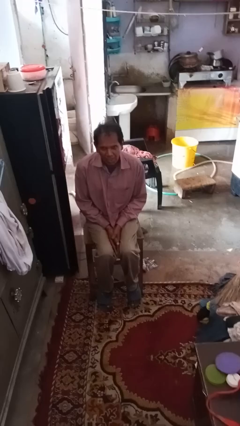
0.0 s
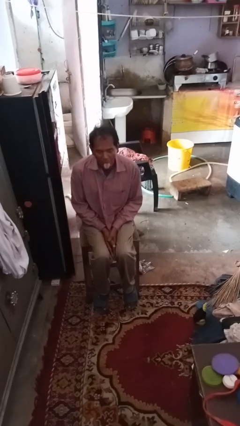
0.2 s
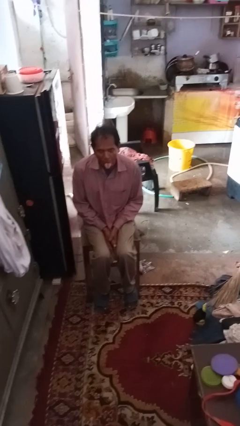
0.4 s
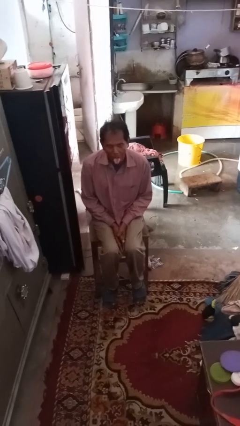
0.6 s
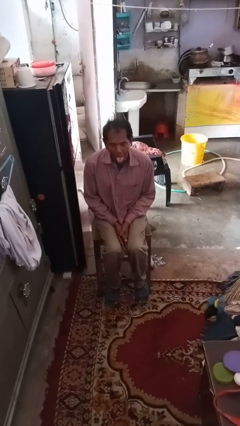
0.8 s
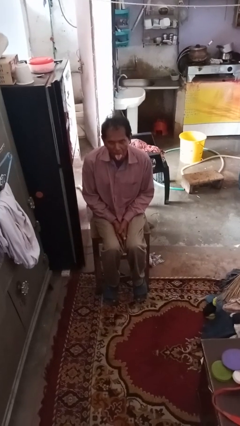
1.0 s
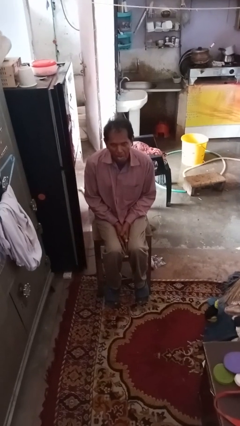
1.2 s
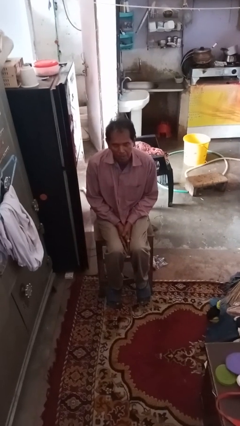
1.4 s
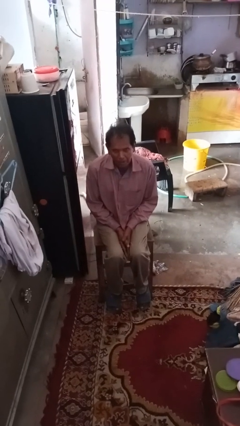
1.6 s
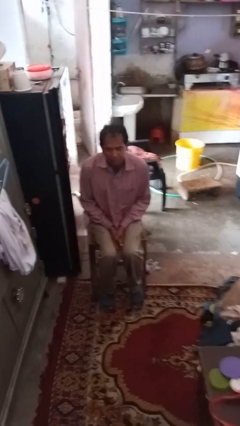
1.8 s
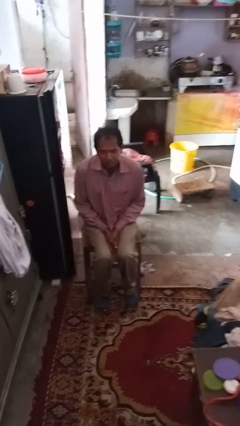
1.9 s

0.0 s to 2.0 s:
person sticks out tongue

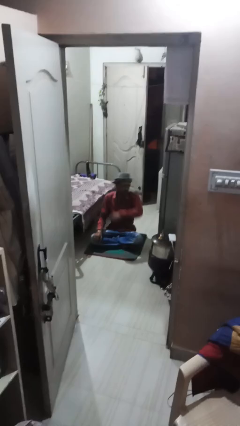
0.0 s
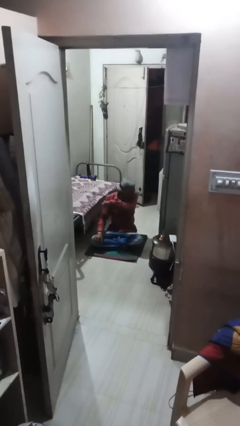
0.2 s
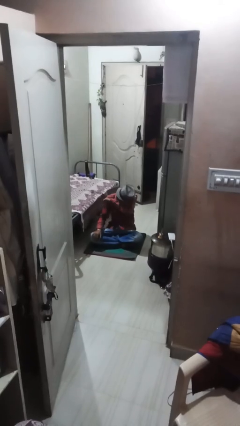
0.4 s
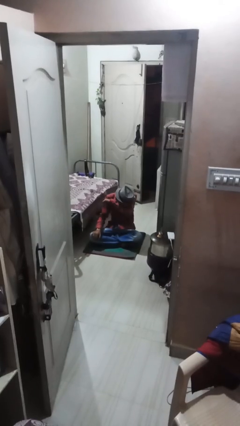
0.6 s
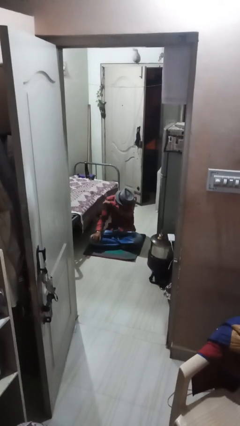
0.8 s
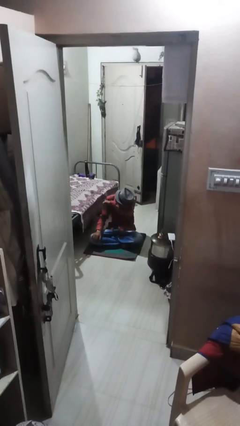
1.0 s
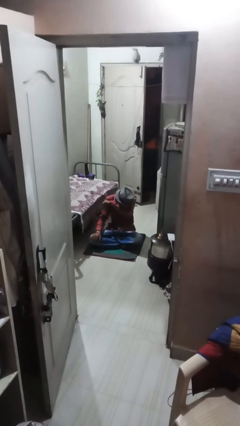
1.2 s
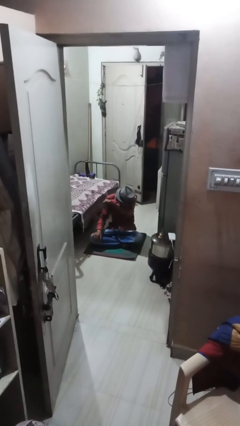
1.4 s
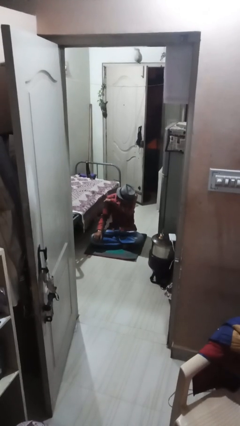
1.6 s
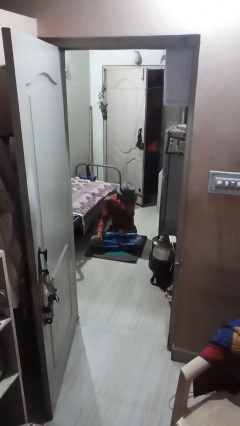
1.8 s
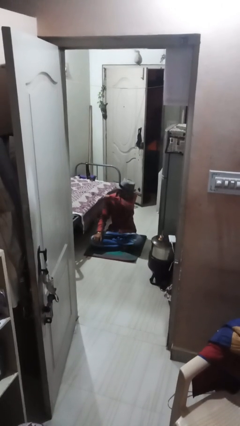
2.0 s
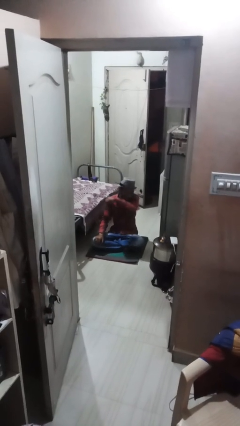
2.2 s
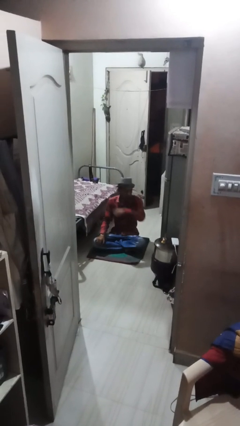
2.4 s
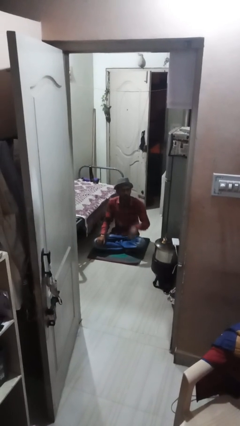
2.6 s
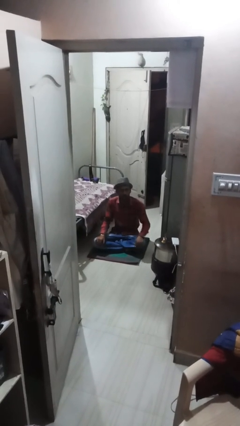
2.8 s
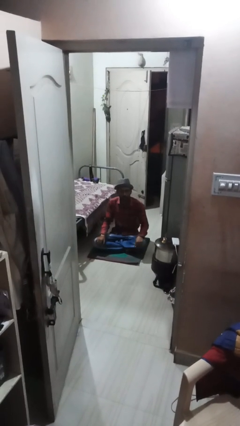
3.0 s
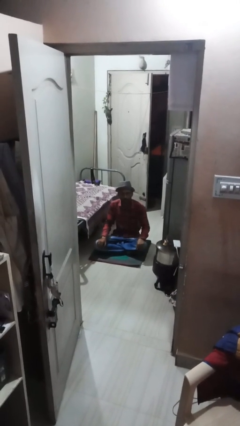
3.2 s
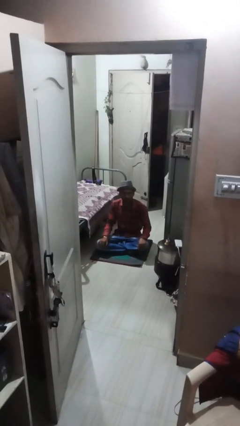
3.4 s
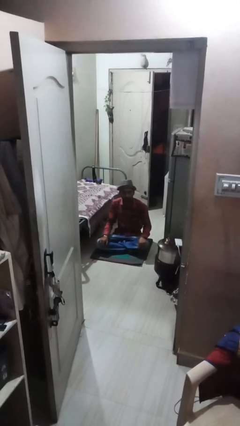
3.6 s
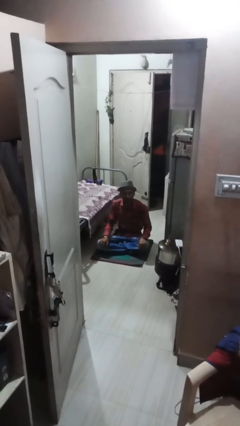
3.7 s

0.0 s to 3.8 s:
person sneezes into arm

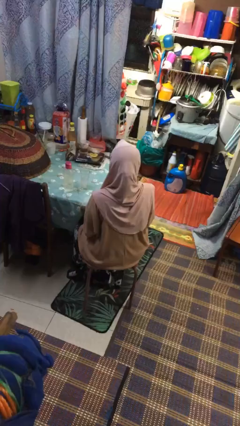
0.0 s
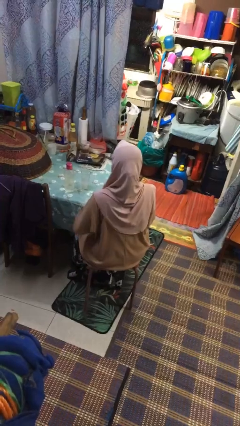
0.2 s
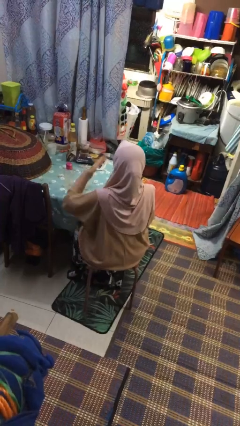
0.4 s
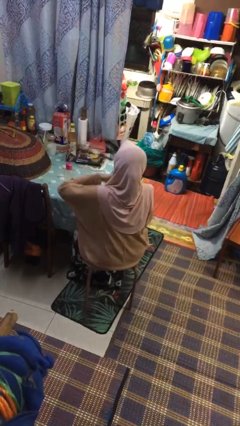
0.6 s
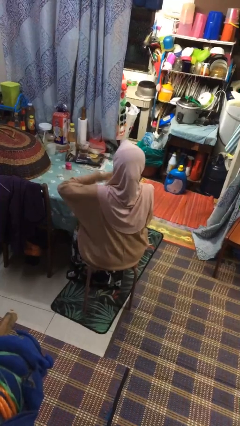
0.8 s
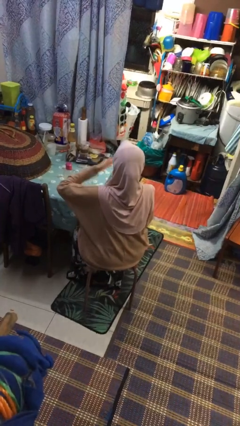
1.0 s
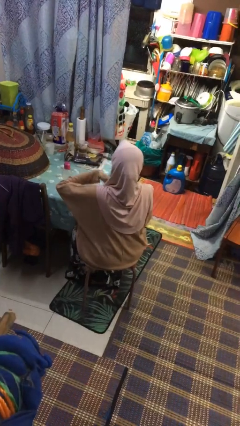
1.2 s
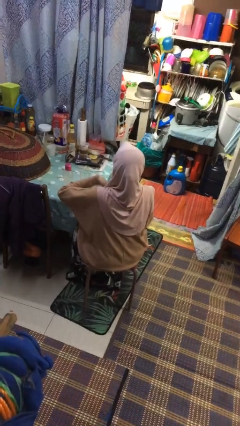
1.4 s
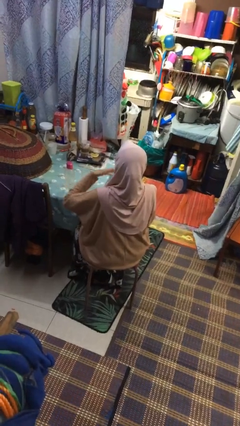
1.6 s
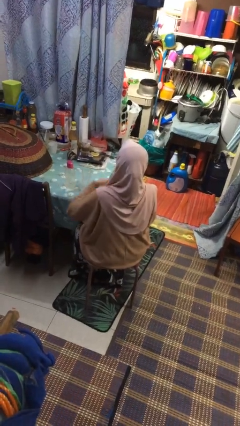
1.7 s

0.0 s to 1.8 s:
person drums on chest

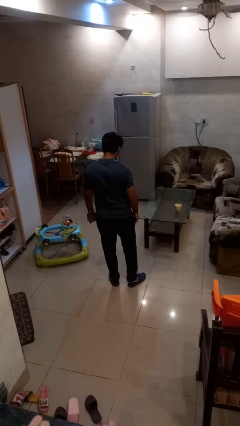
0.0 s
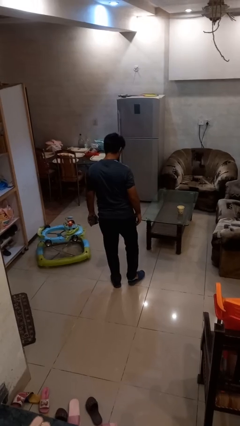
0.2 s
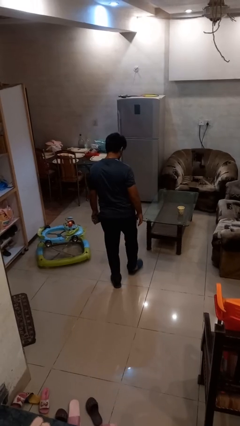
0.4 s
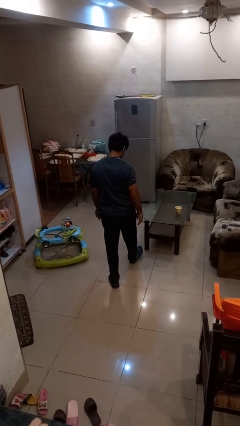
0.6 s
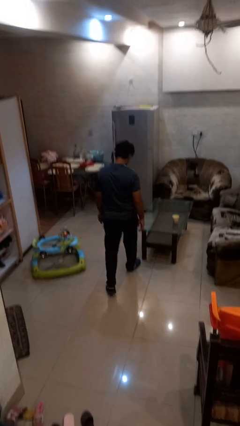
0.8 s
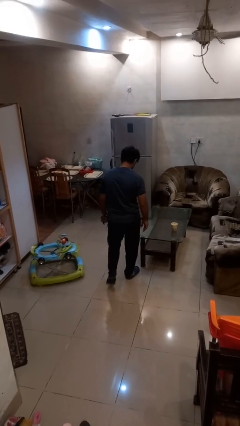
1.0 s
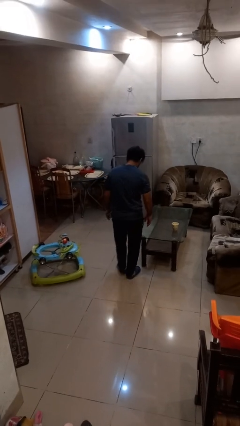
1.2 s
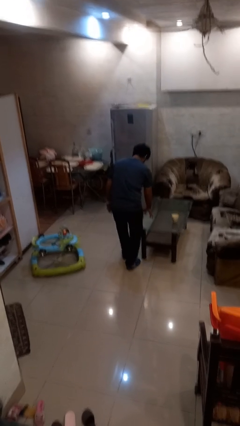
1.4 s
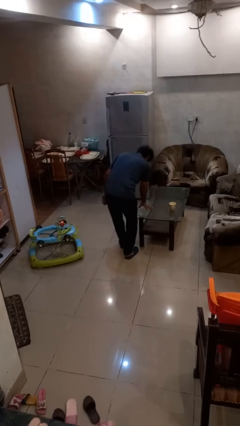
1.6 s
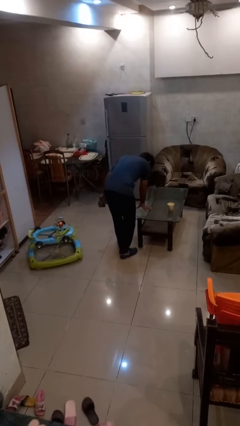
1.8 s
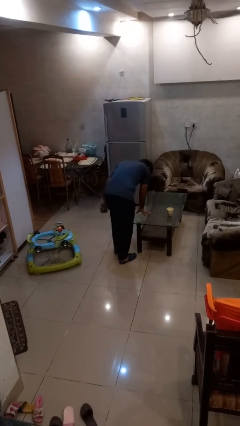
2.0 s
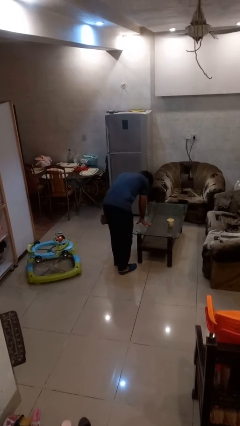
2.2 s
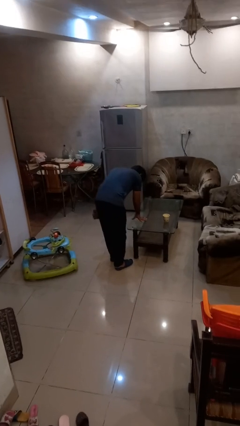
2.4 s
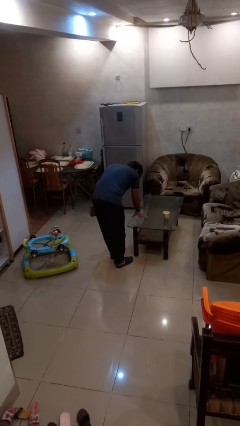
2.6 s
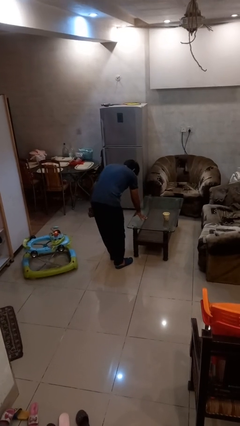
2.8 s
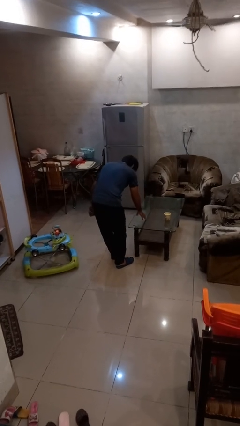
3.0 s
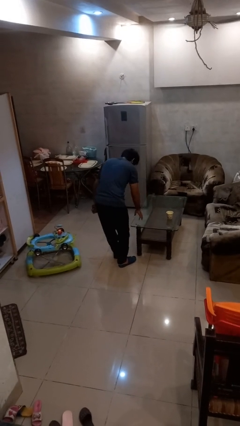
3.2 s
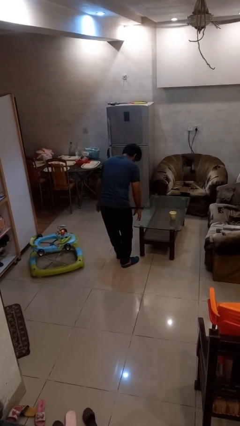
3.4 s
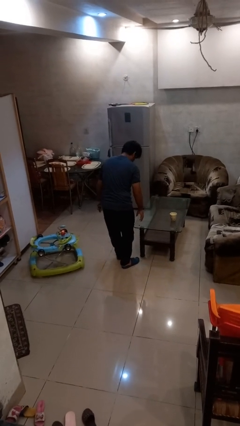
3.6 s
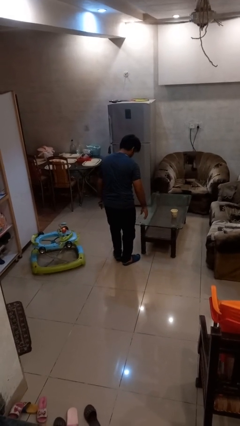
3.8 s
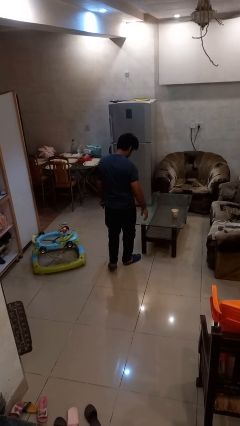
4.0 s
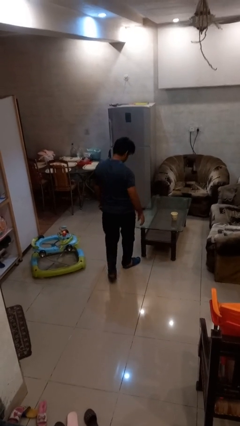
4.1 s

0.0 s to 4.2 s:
person bumps into table

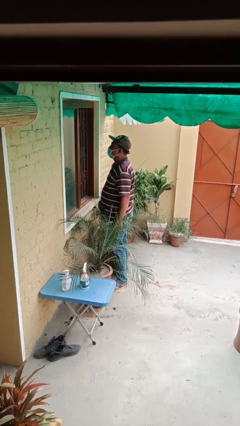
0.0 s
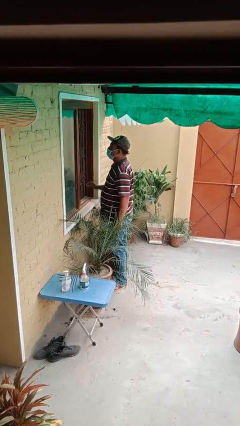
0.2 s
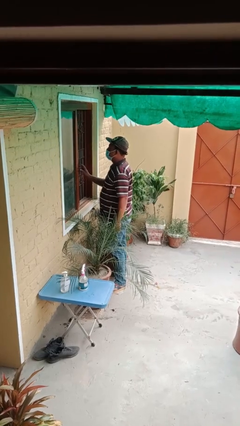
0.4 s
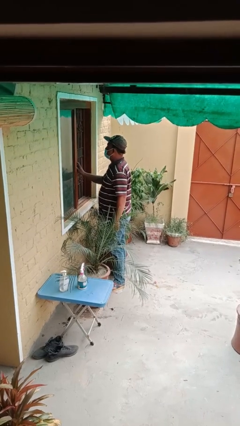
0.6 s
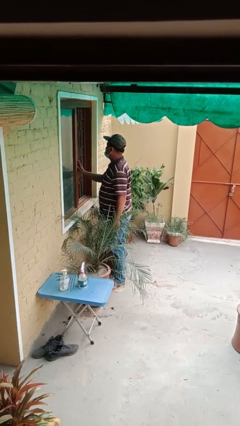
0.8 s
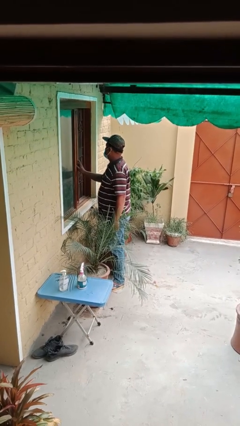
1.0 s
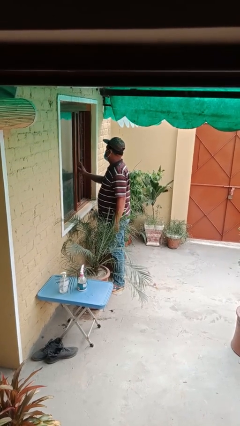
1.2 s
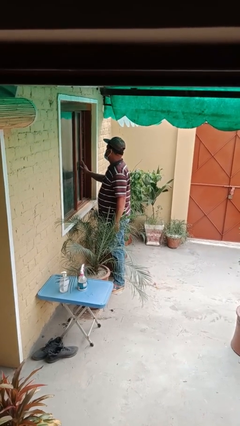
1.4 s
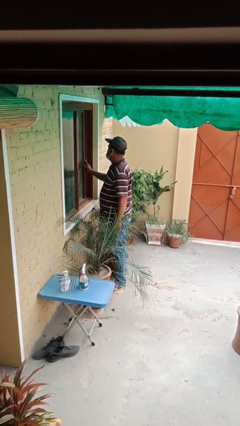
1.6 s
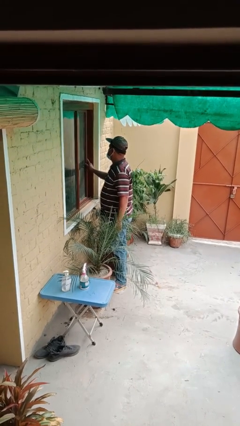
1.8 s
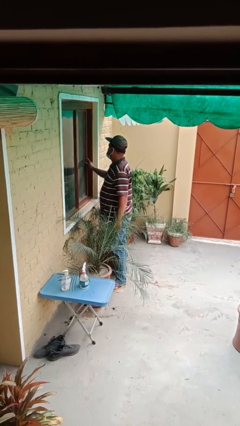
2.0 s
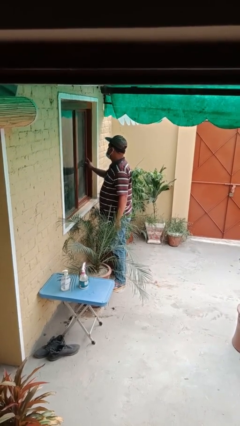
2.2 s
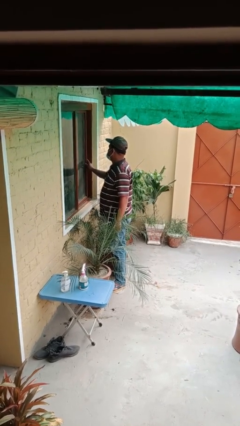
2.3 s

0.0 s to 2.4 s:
person closes home window

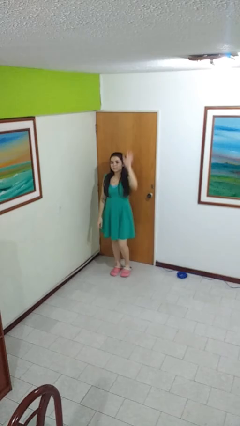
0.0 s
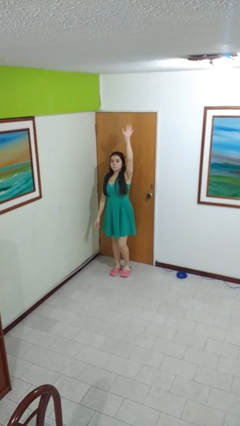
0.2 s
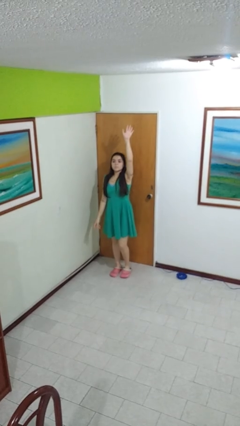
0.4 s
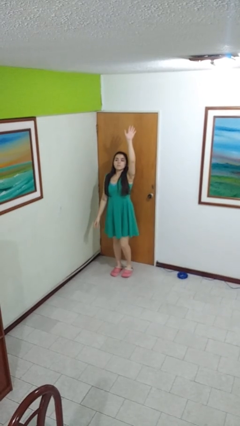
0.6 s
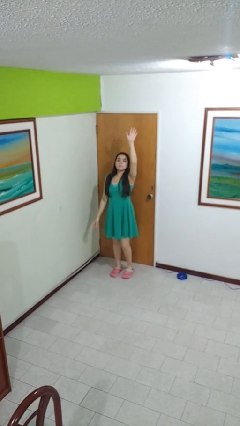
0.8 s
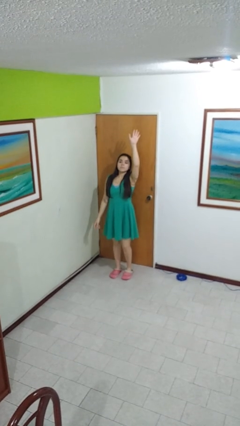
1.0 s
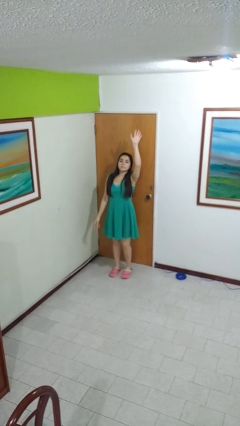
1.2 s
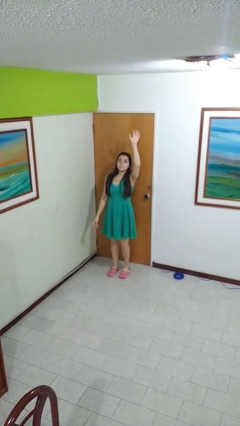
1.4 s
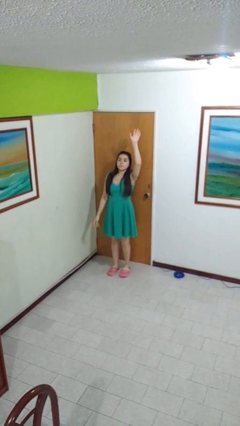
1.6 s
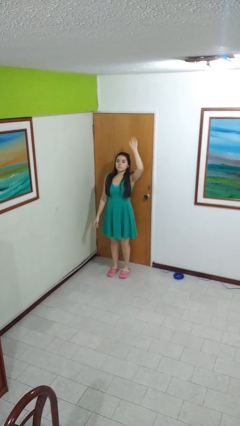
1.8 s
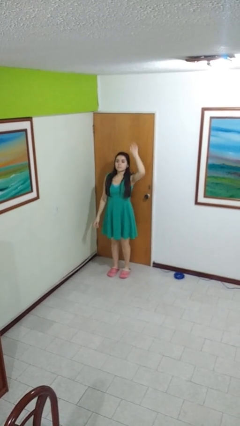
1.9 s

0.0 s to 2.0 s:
person gestures raise hand

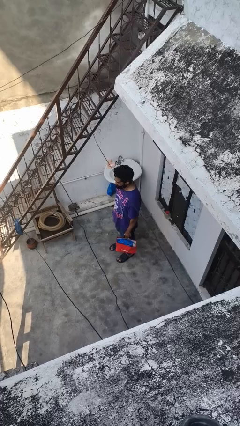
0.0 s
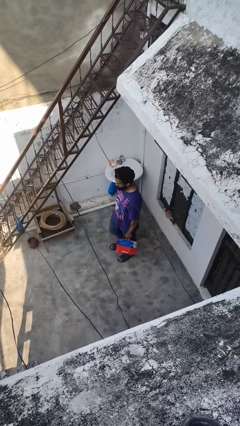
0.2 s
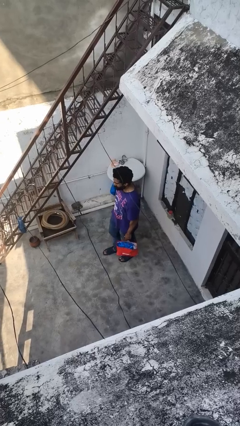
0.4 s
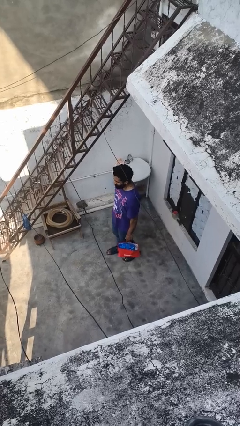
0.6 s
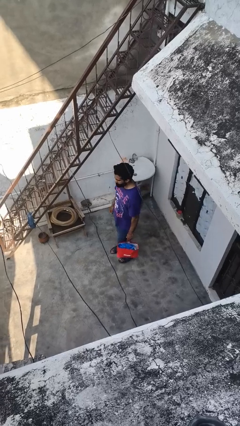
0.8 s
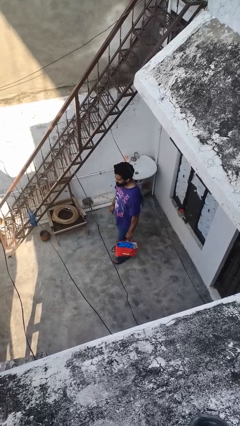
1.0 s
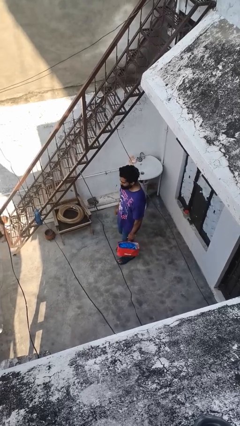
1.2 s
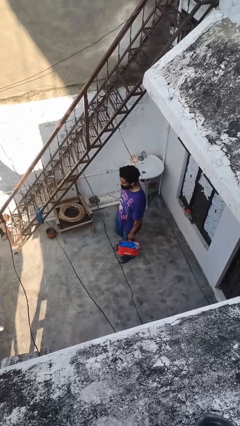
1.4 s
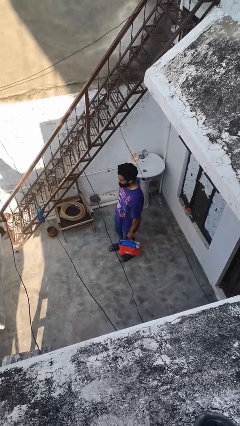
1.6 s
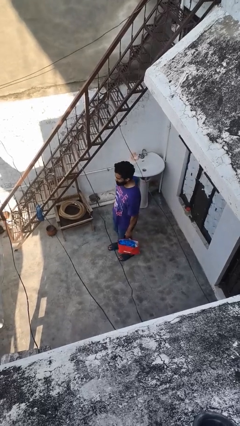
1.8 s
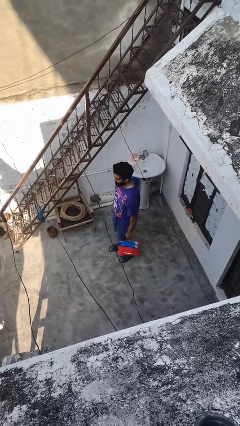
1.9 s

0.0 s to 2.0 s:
person carries groceries
